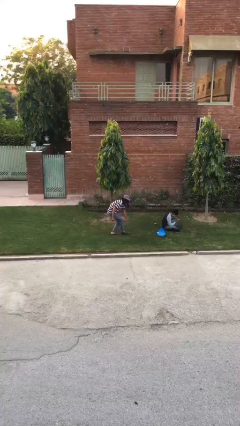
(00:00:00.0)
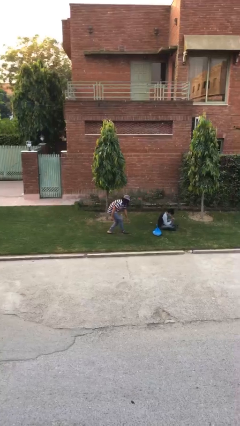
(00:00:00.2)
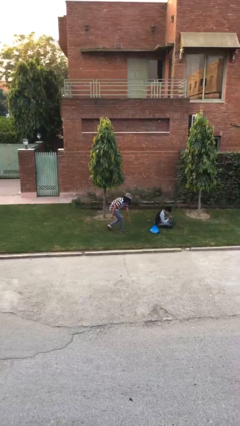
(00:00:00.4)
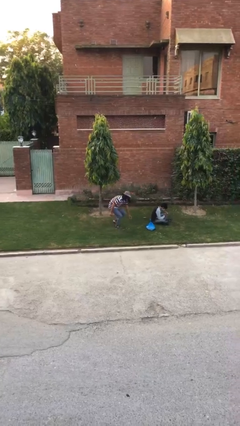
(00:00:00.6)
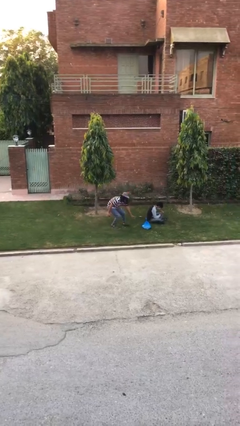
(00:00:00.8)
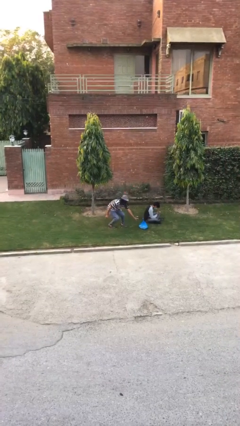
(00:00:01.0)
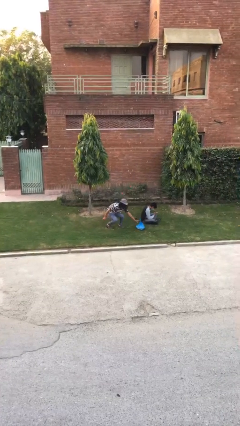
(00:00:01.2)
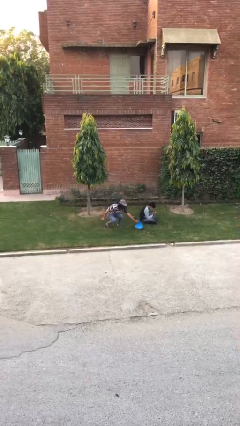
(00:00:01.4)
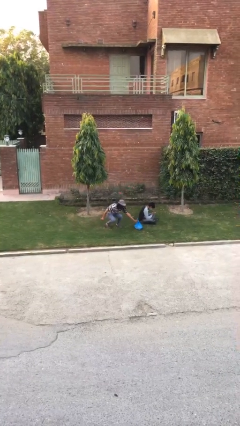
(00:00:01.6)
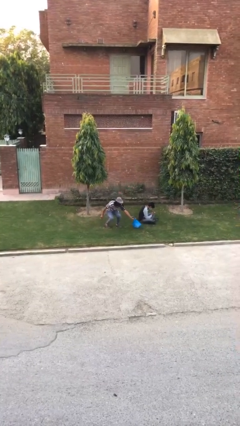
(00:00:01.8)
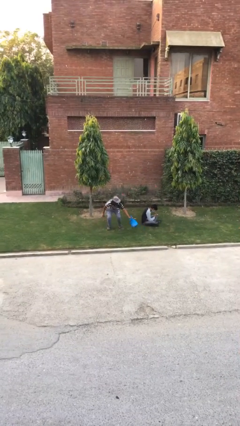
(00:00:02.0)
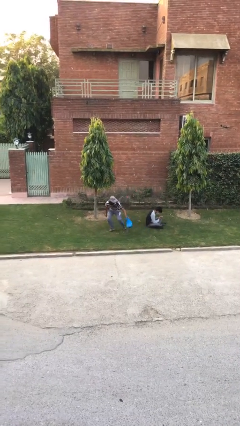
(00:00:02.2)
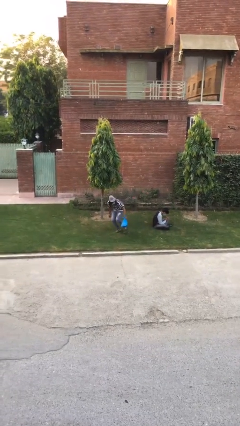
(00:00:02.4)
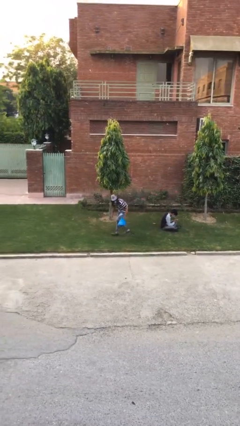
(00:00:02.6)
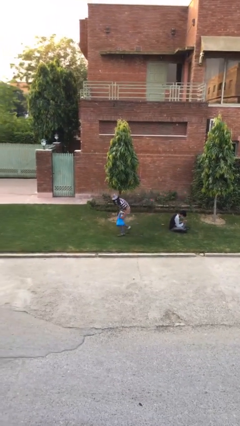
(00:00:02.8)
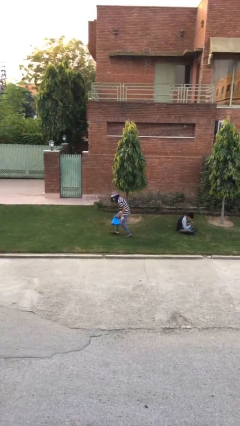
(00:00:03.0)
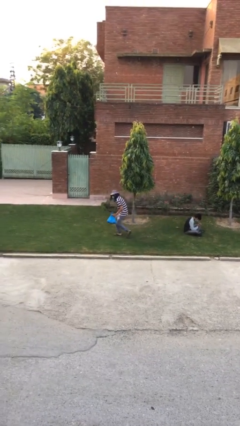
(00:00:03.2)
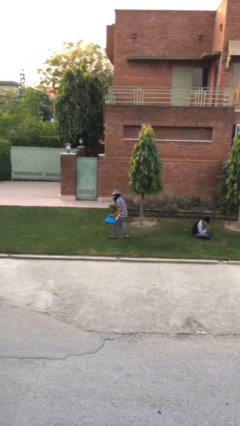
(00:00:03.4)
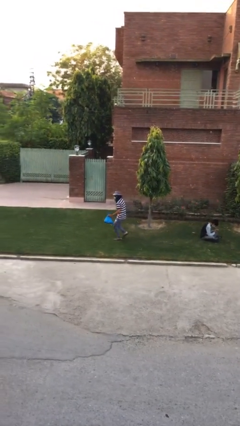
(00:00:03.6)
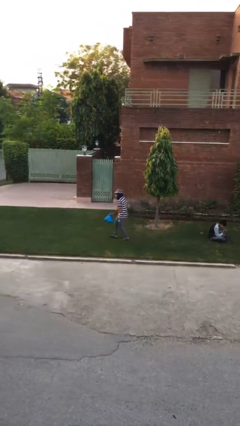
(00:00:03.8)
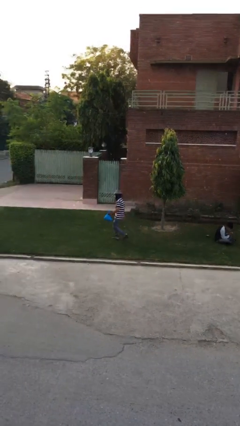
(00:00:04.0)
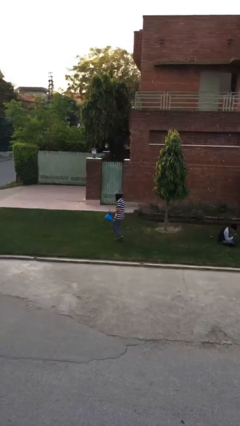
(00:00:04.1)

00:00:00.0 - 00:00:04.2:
person steals object from person

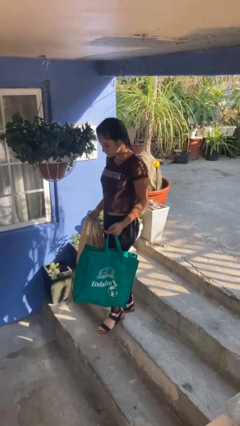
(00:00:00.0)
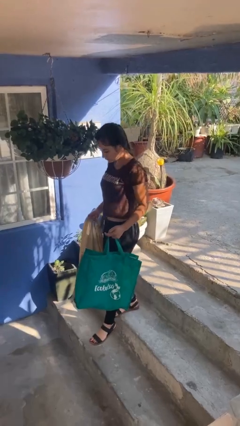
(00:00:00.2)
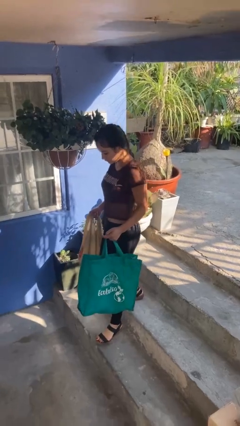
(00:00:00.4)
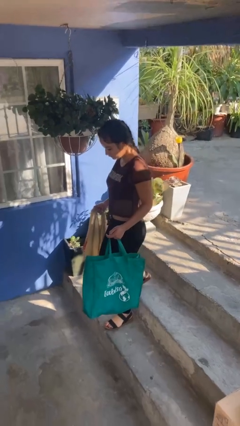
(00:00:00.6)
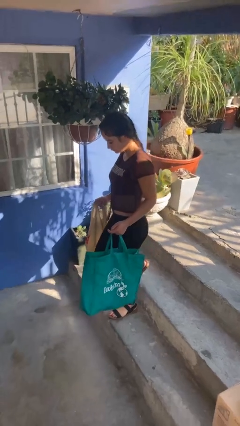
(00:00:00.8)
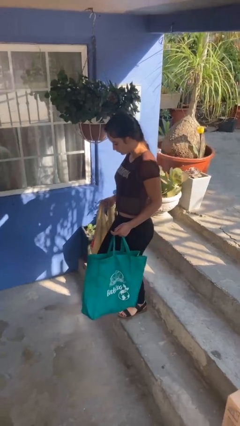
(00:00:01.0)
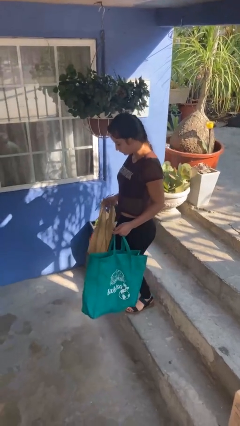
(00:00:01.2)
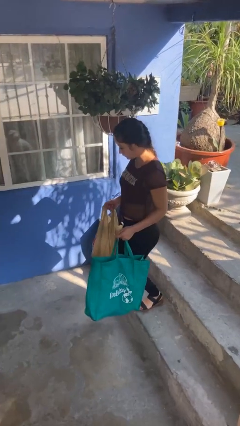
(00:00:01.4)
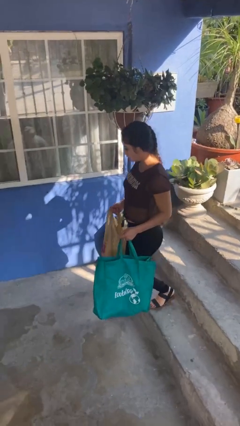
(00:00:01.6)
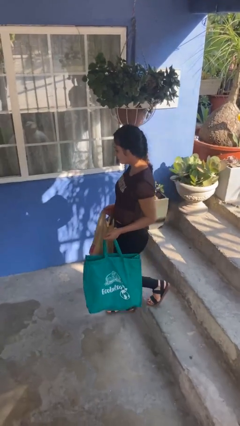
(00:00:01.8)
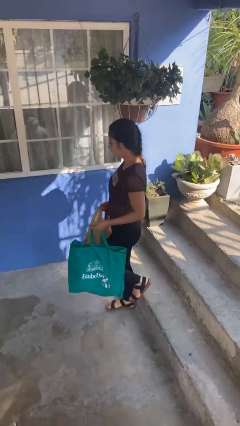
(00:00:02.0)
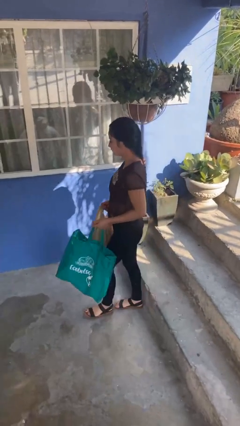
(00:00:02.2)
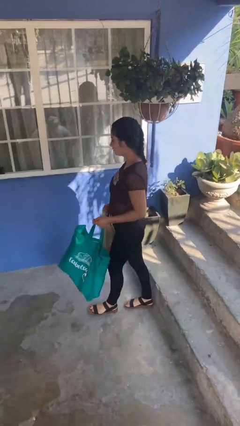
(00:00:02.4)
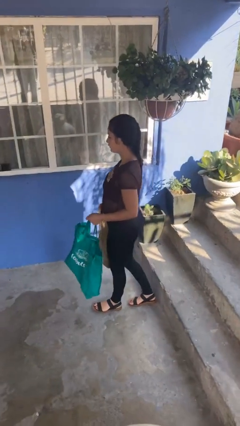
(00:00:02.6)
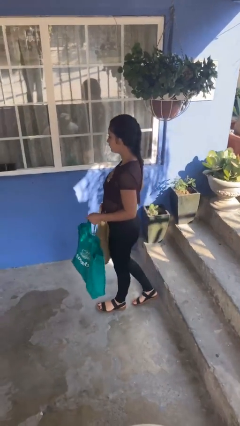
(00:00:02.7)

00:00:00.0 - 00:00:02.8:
person carries groceries

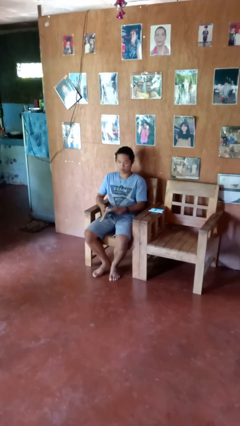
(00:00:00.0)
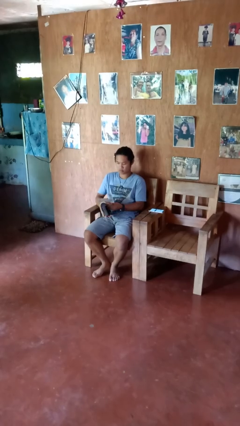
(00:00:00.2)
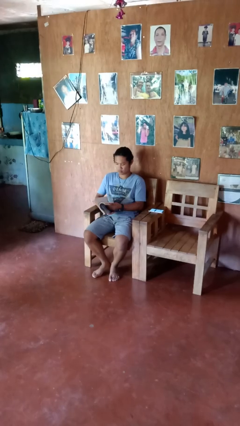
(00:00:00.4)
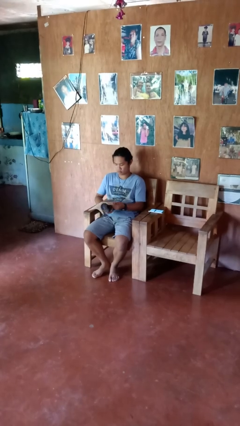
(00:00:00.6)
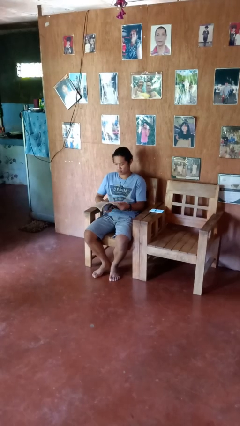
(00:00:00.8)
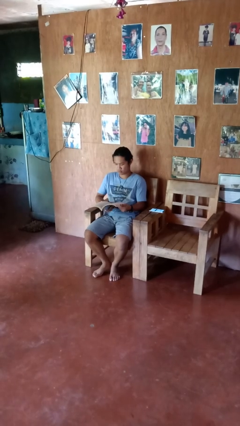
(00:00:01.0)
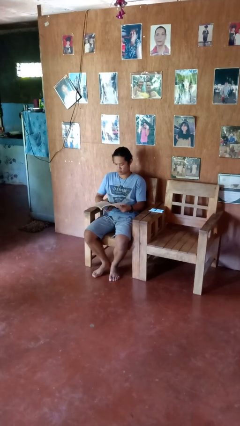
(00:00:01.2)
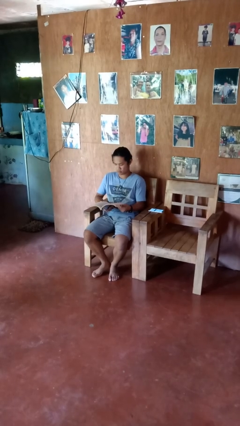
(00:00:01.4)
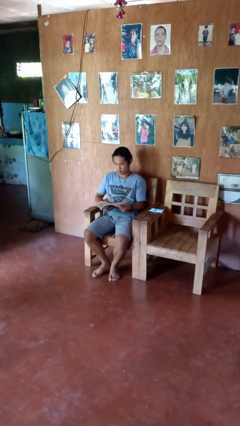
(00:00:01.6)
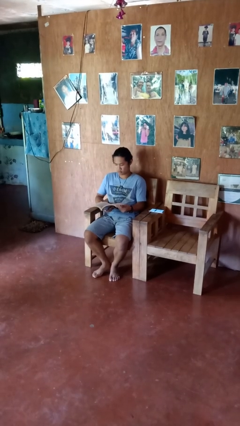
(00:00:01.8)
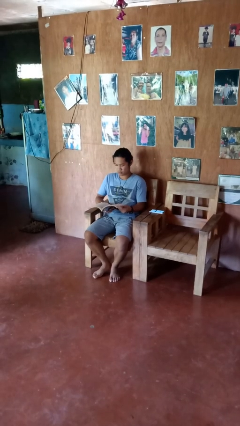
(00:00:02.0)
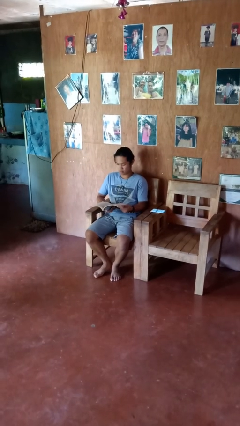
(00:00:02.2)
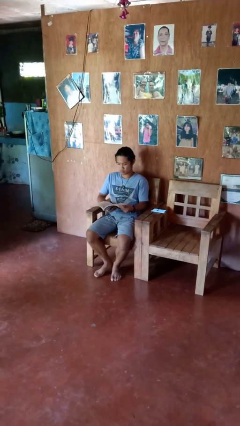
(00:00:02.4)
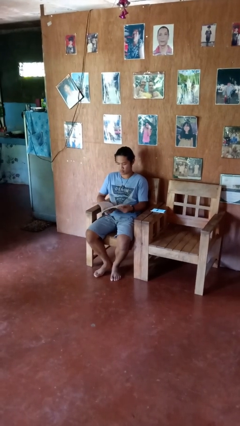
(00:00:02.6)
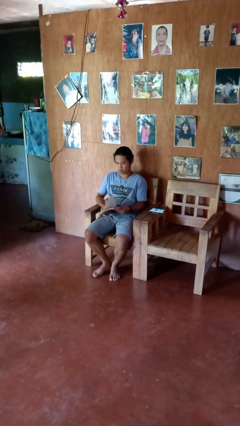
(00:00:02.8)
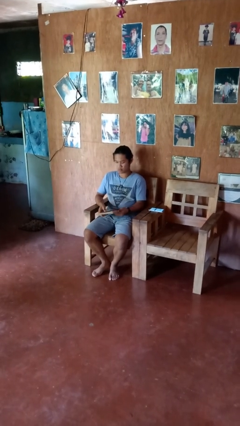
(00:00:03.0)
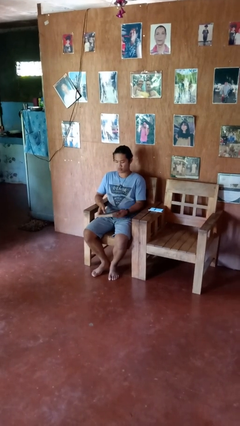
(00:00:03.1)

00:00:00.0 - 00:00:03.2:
person reads book

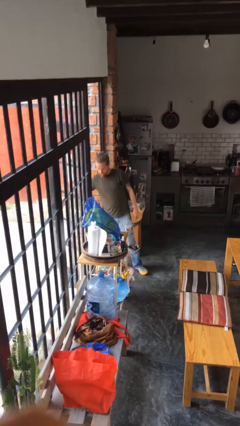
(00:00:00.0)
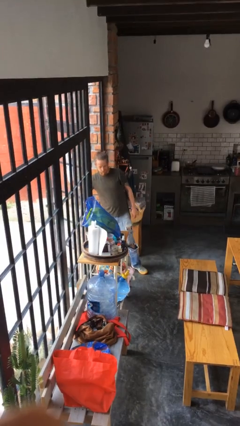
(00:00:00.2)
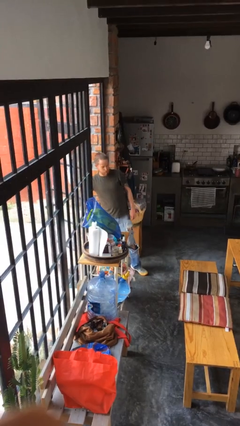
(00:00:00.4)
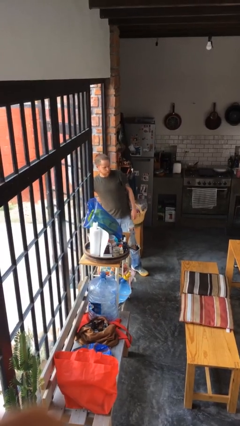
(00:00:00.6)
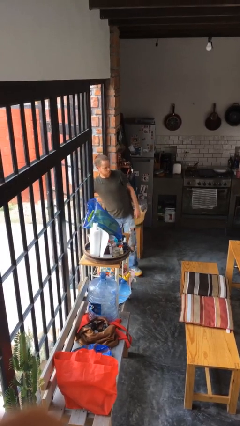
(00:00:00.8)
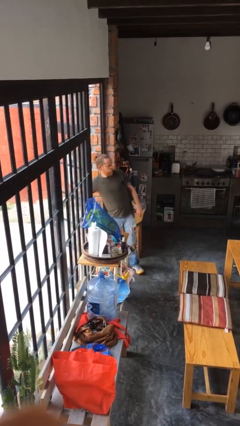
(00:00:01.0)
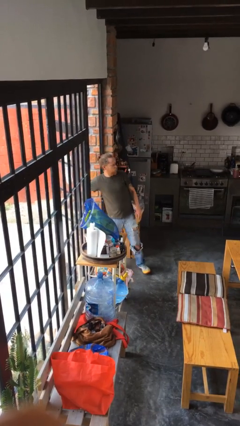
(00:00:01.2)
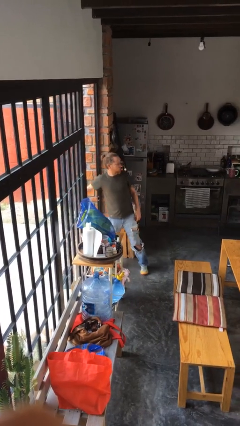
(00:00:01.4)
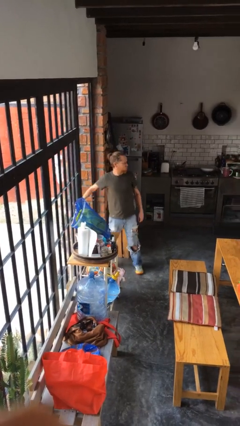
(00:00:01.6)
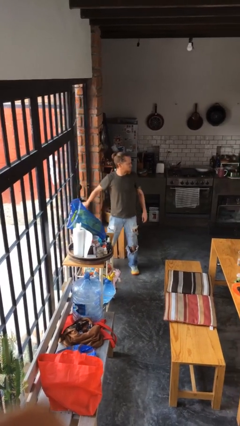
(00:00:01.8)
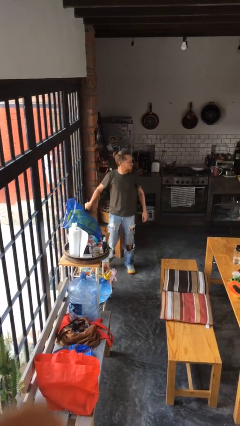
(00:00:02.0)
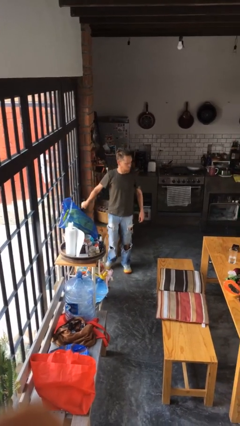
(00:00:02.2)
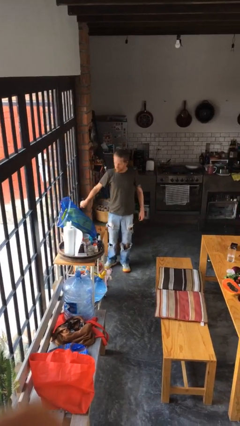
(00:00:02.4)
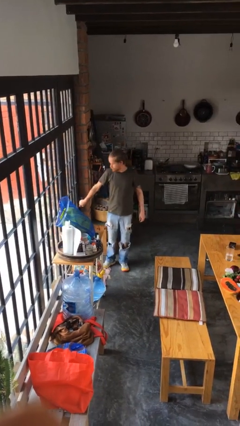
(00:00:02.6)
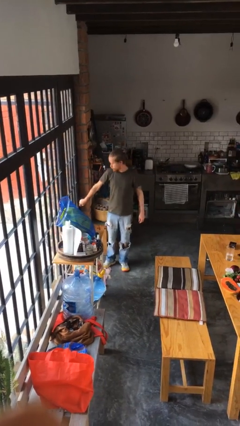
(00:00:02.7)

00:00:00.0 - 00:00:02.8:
person closes facility door

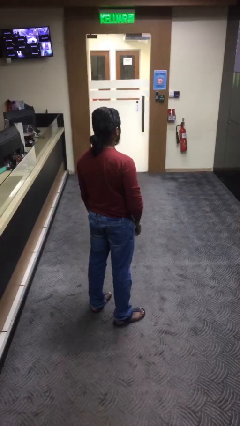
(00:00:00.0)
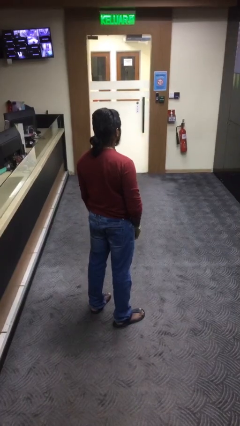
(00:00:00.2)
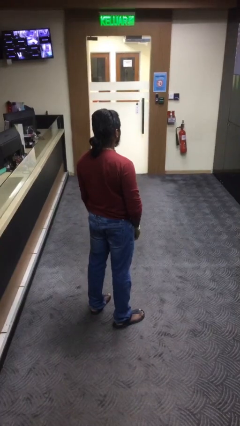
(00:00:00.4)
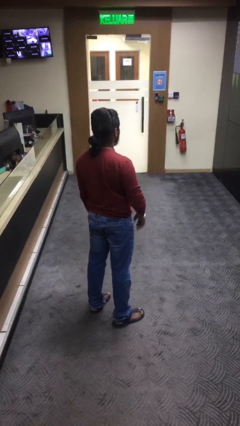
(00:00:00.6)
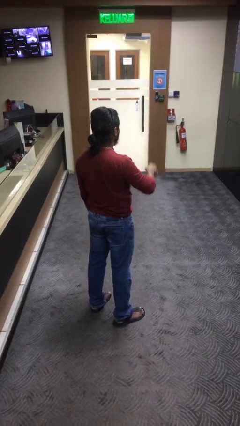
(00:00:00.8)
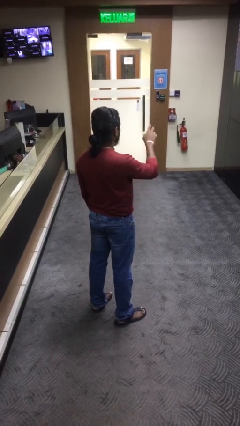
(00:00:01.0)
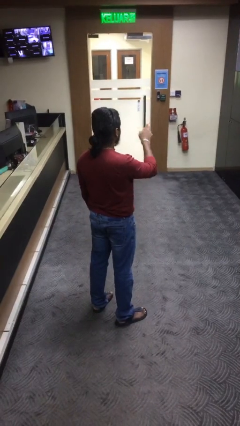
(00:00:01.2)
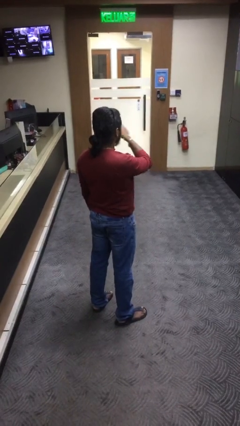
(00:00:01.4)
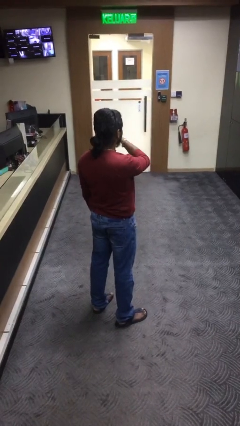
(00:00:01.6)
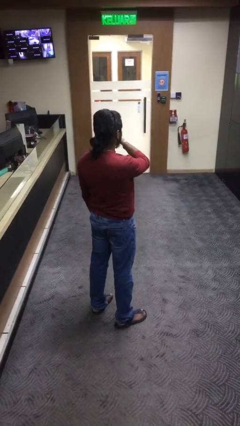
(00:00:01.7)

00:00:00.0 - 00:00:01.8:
person gestures swipe left

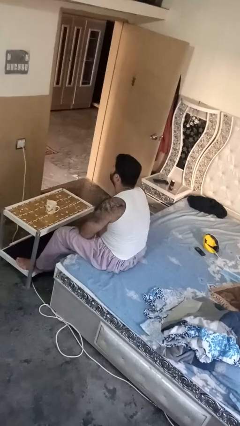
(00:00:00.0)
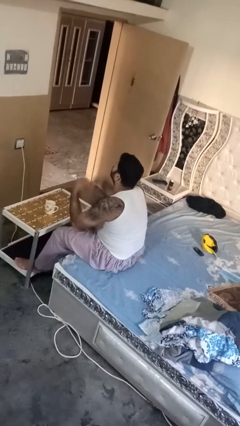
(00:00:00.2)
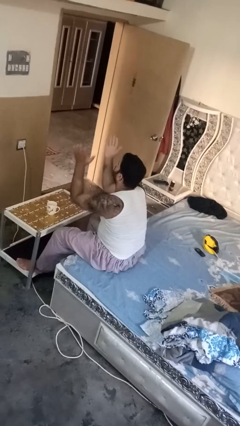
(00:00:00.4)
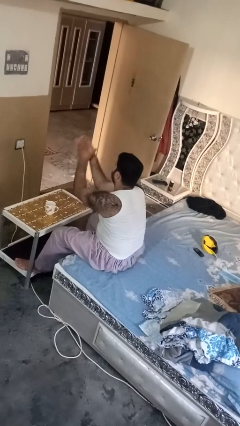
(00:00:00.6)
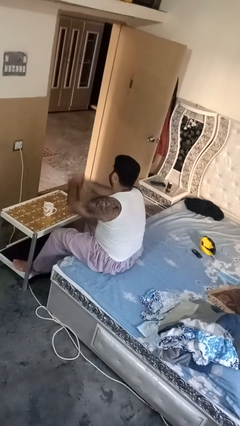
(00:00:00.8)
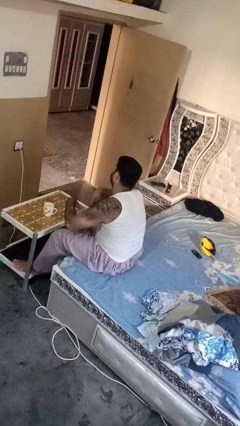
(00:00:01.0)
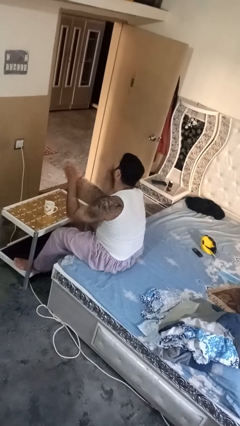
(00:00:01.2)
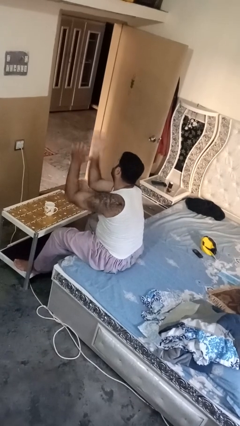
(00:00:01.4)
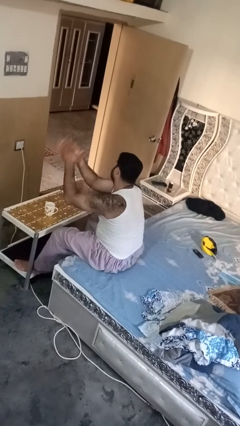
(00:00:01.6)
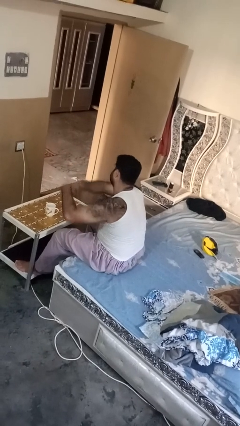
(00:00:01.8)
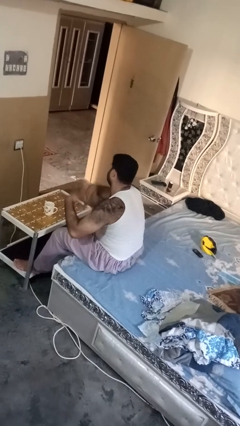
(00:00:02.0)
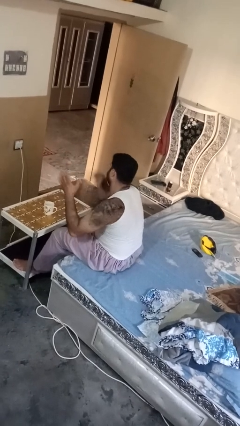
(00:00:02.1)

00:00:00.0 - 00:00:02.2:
person claps hands
